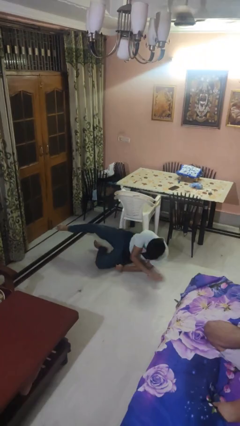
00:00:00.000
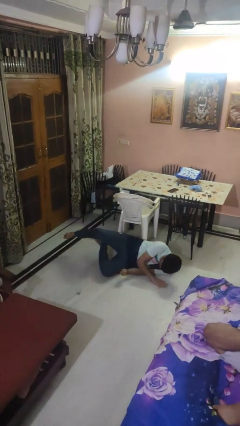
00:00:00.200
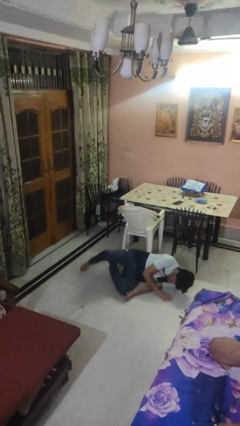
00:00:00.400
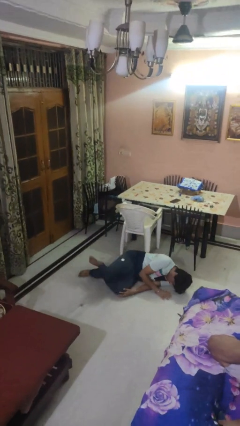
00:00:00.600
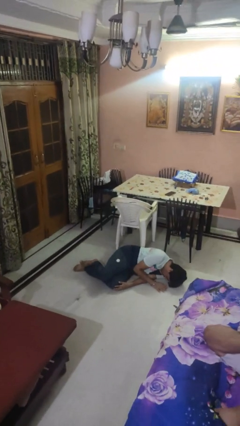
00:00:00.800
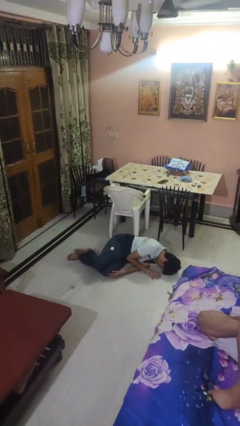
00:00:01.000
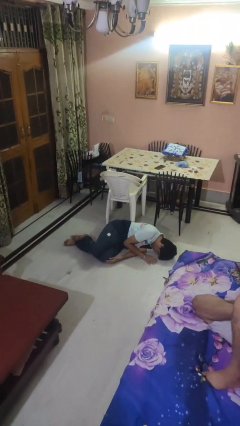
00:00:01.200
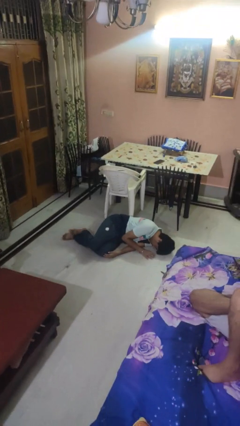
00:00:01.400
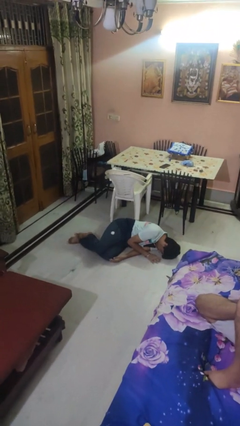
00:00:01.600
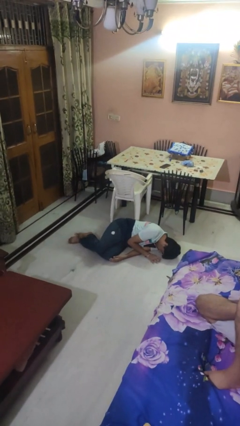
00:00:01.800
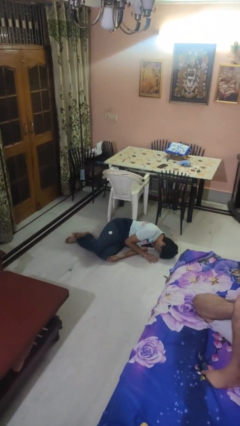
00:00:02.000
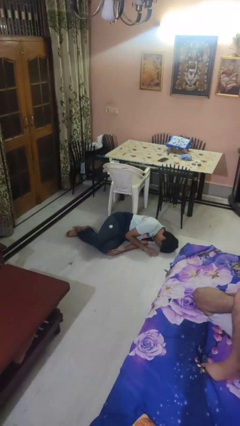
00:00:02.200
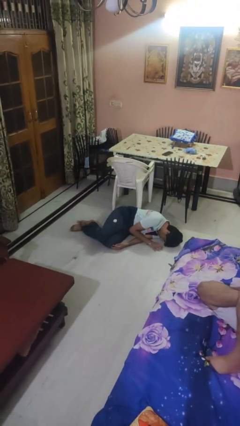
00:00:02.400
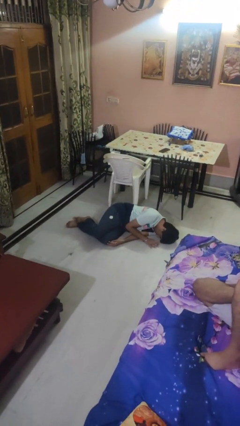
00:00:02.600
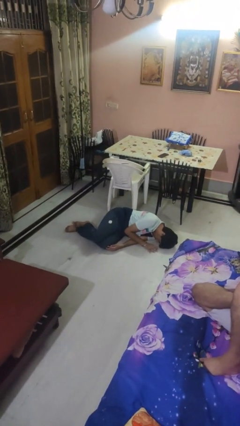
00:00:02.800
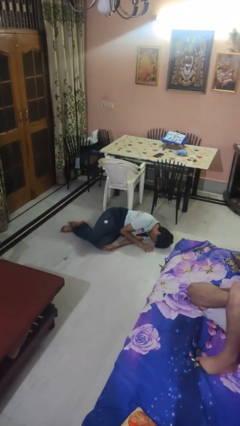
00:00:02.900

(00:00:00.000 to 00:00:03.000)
person lies down on floor

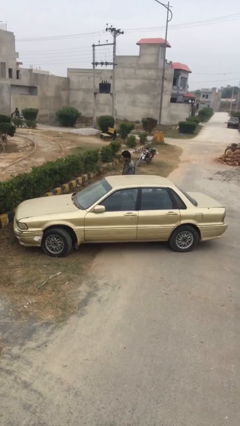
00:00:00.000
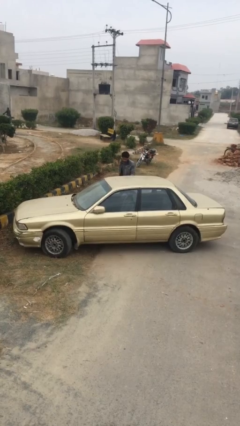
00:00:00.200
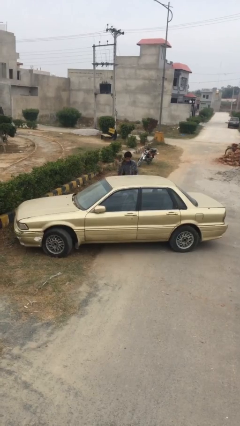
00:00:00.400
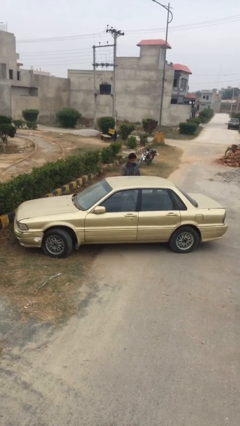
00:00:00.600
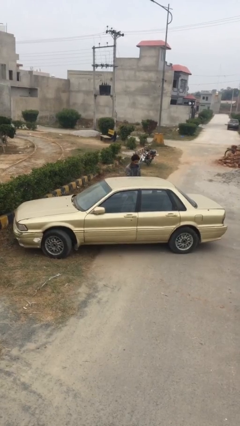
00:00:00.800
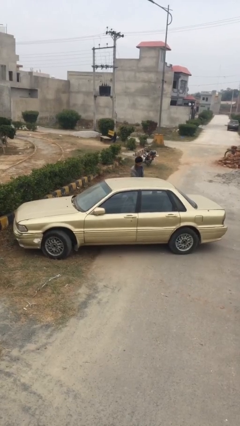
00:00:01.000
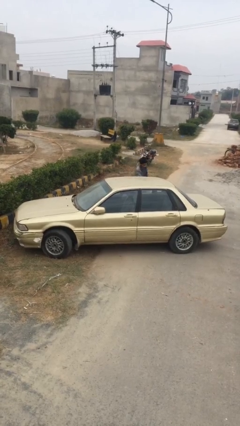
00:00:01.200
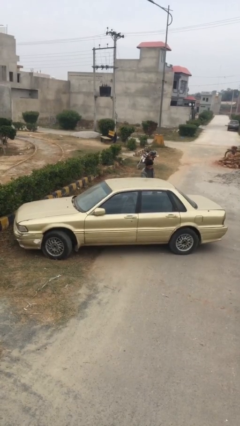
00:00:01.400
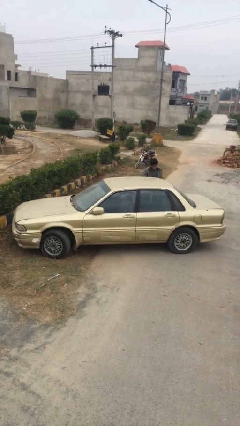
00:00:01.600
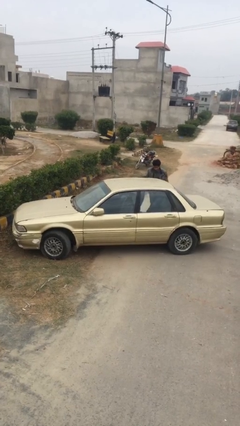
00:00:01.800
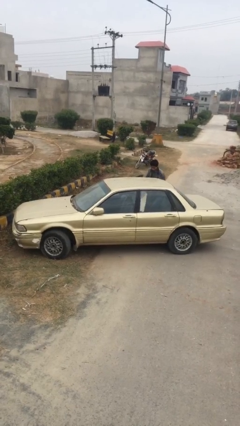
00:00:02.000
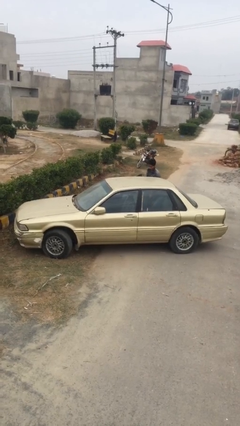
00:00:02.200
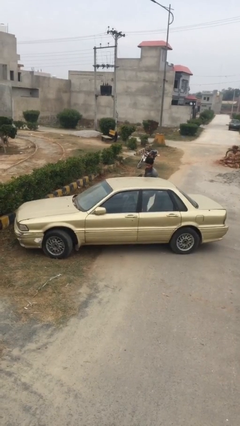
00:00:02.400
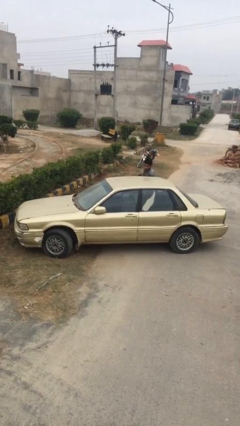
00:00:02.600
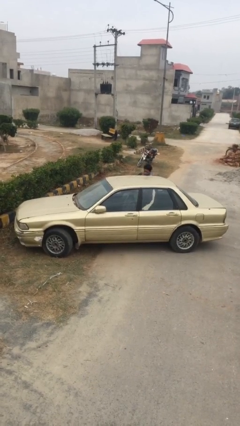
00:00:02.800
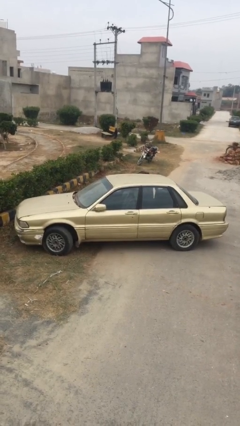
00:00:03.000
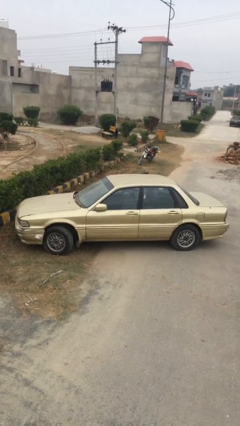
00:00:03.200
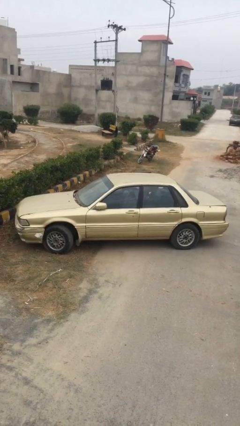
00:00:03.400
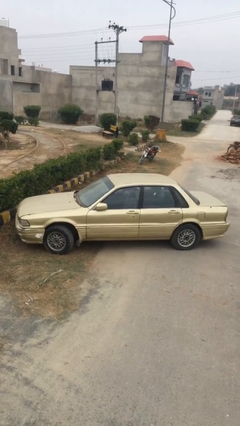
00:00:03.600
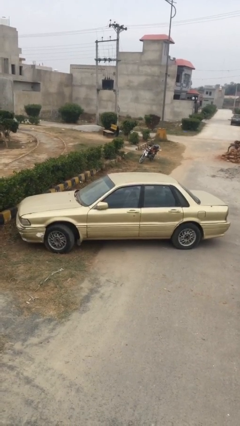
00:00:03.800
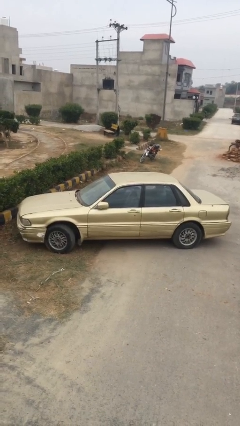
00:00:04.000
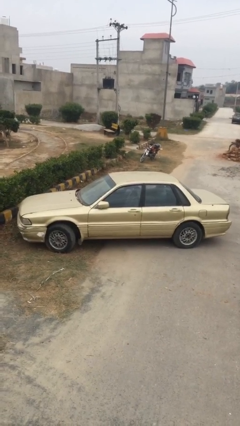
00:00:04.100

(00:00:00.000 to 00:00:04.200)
car picks up person

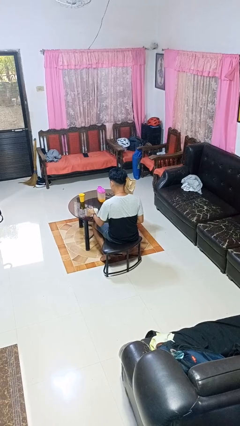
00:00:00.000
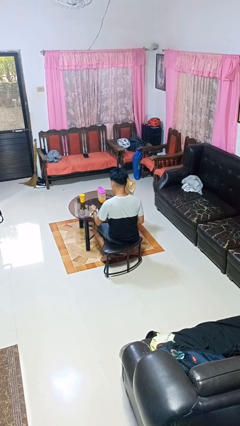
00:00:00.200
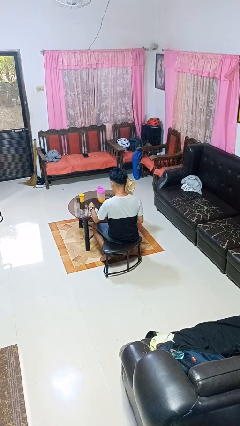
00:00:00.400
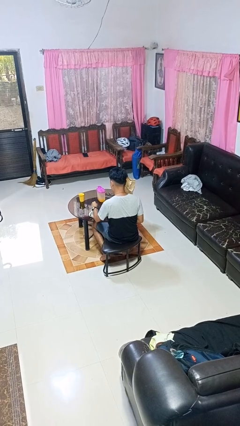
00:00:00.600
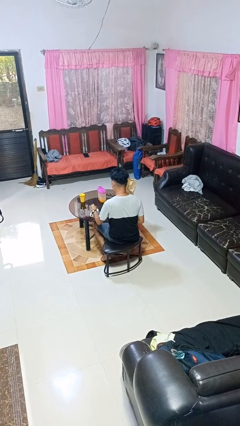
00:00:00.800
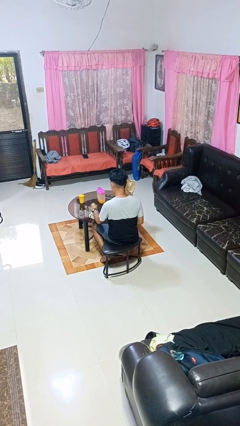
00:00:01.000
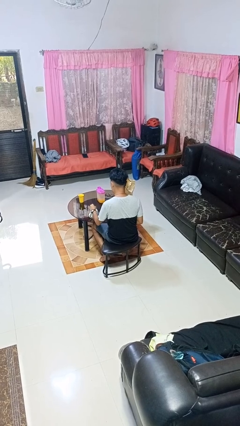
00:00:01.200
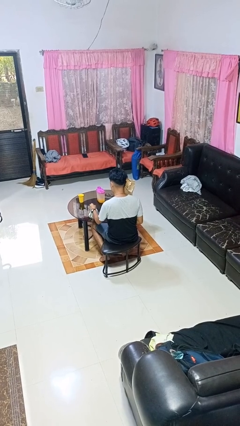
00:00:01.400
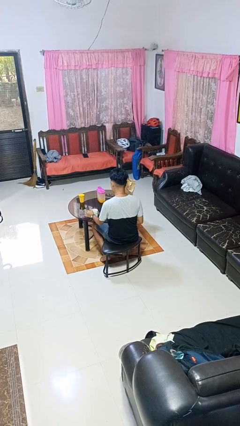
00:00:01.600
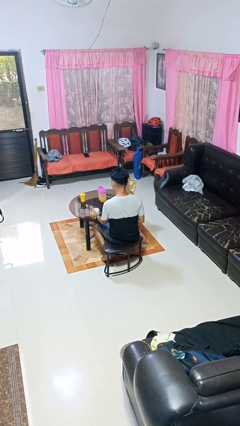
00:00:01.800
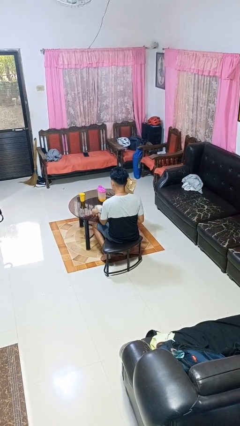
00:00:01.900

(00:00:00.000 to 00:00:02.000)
person stirs mug

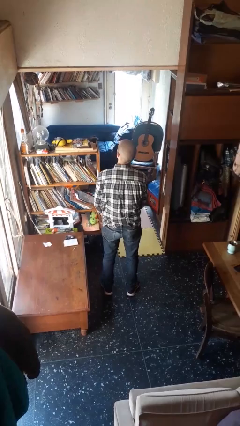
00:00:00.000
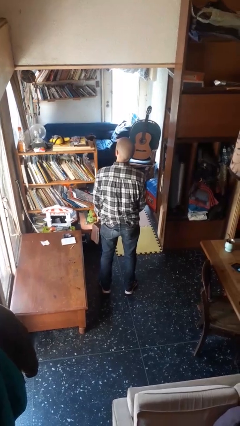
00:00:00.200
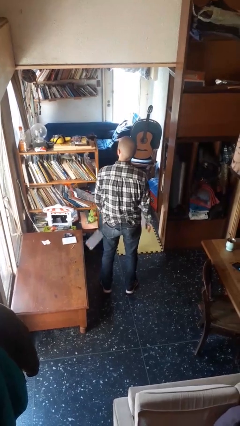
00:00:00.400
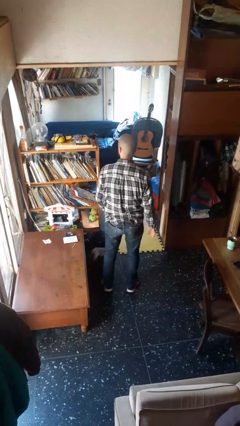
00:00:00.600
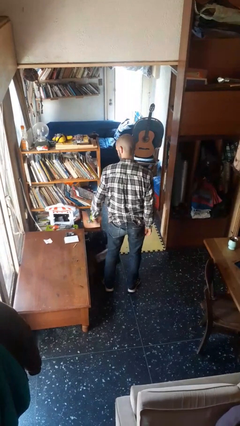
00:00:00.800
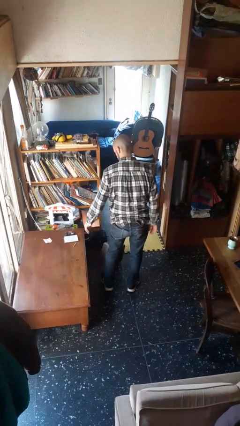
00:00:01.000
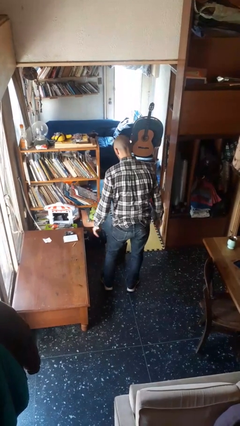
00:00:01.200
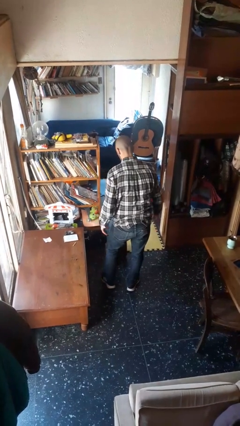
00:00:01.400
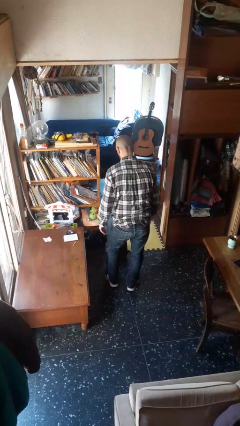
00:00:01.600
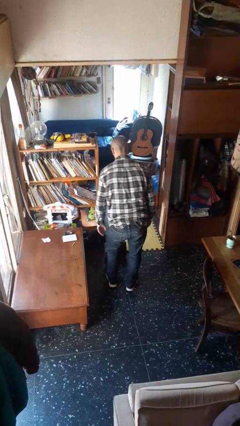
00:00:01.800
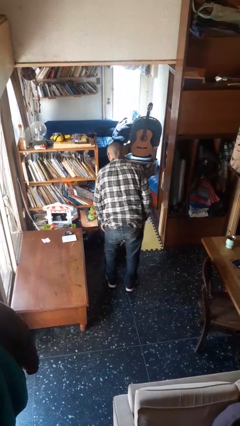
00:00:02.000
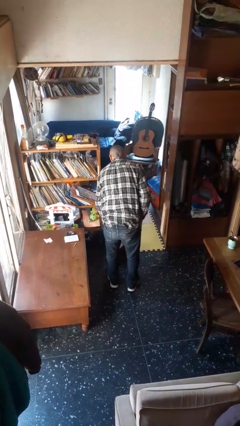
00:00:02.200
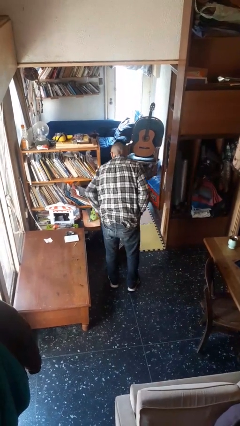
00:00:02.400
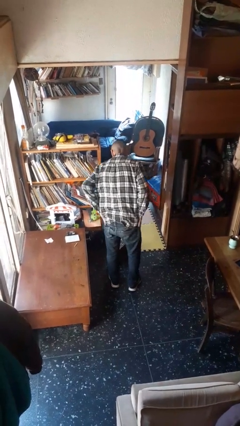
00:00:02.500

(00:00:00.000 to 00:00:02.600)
person drops object

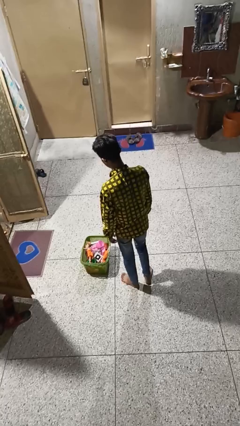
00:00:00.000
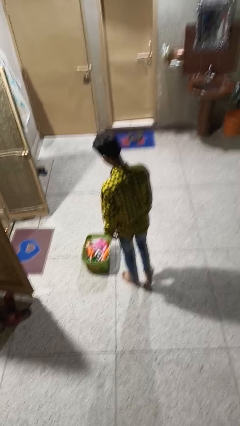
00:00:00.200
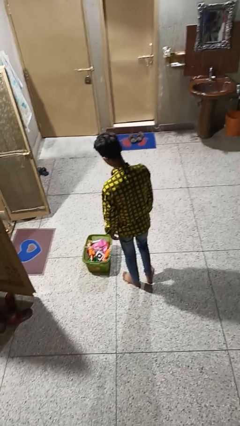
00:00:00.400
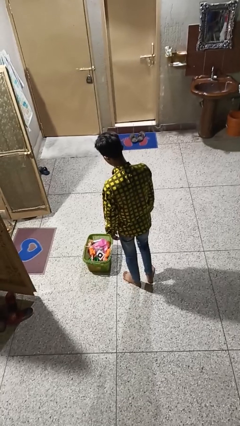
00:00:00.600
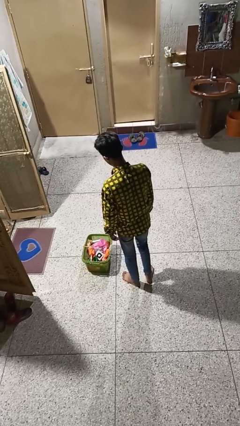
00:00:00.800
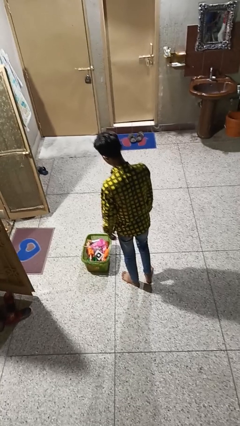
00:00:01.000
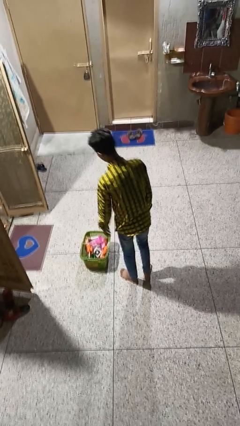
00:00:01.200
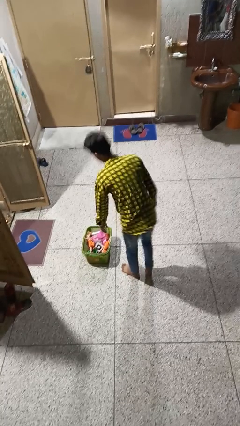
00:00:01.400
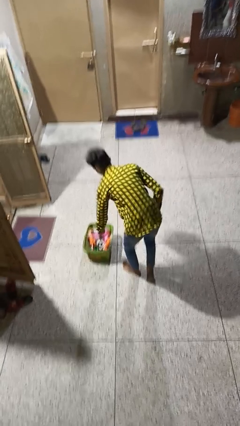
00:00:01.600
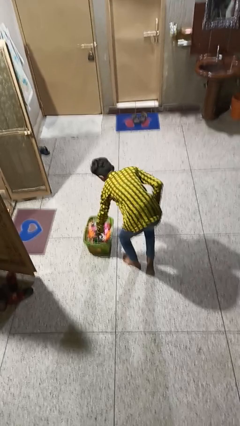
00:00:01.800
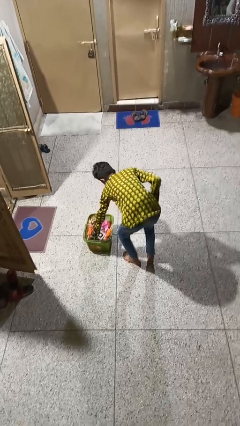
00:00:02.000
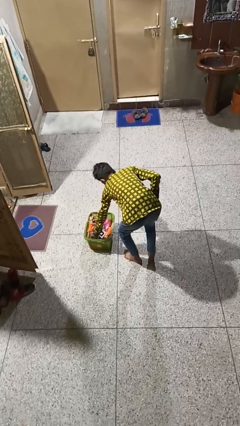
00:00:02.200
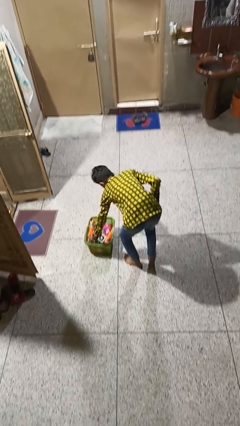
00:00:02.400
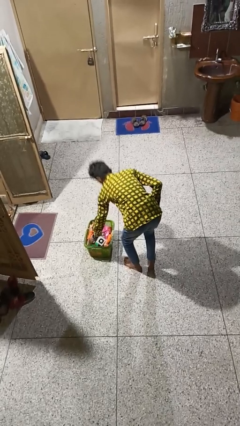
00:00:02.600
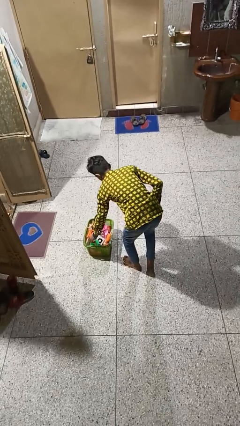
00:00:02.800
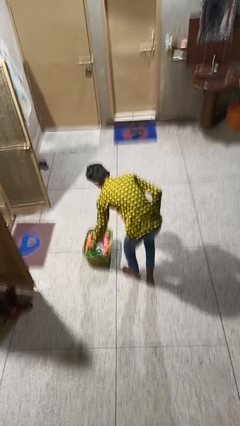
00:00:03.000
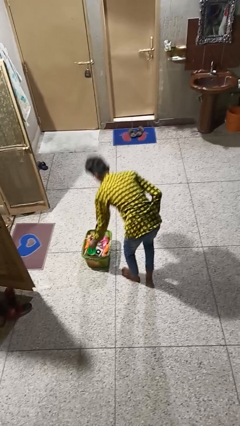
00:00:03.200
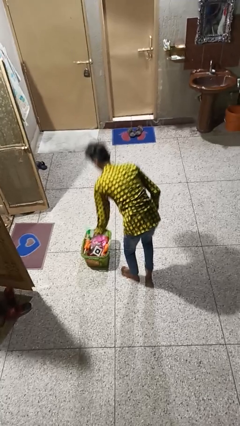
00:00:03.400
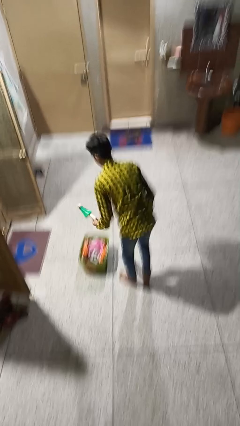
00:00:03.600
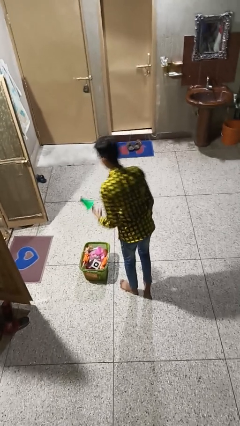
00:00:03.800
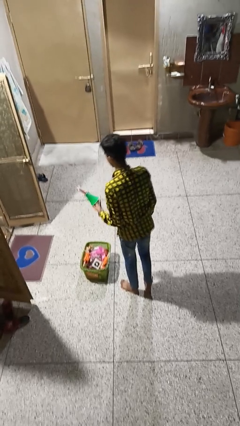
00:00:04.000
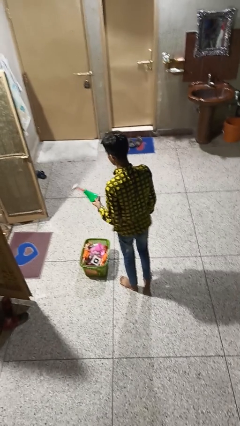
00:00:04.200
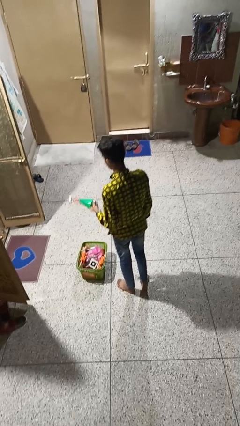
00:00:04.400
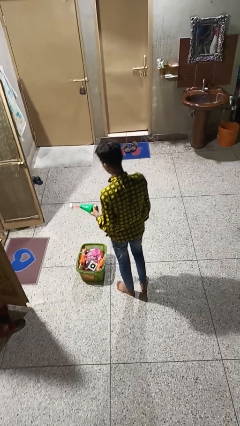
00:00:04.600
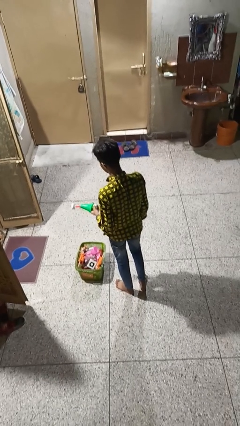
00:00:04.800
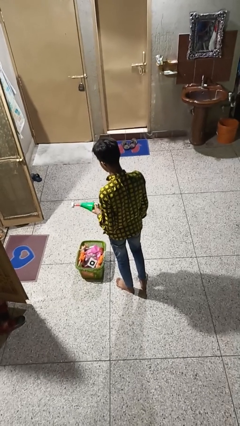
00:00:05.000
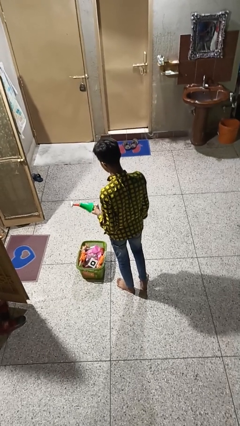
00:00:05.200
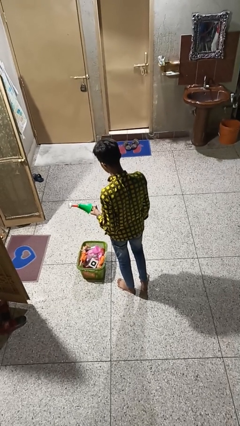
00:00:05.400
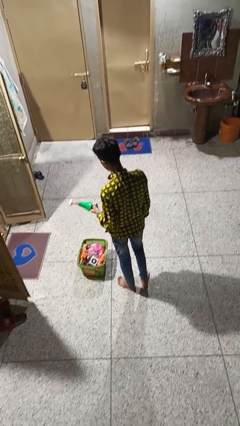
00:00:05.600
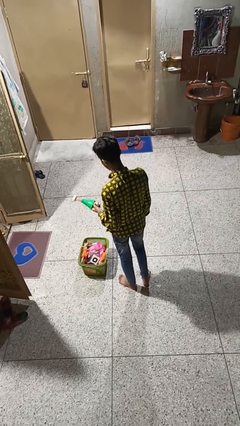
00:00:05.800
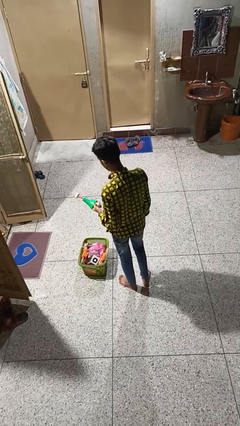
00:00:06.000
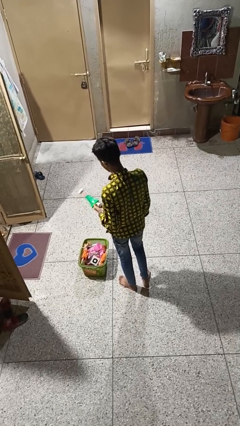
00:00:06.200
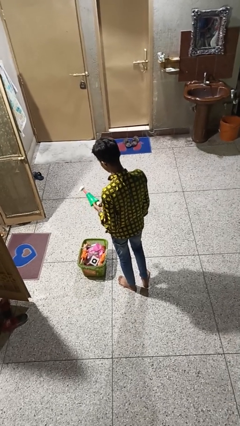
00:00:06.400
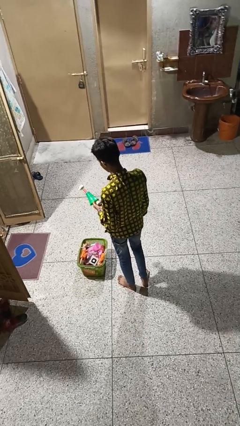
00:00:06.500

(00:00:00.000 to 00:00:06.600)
person puts object into basket
